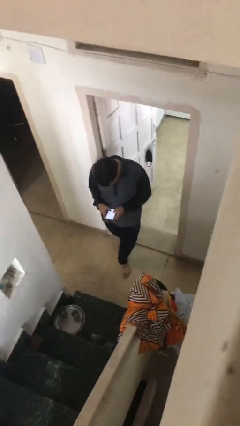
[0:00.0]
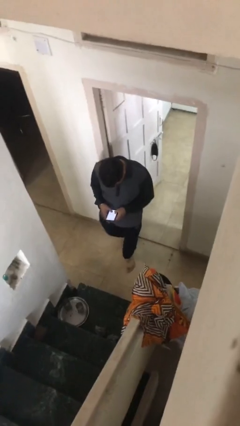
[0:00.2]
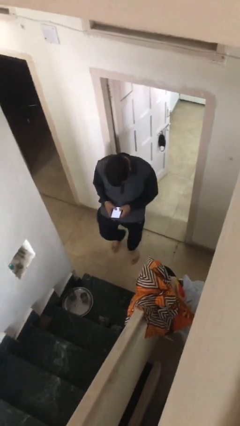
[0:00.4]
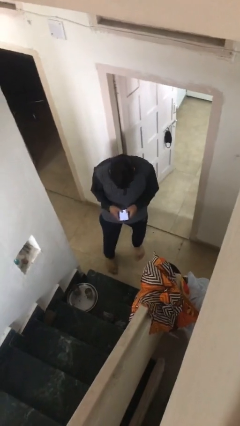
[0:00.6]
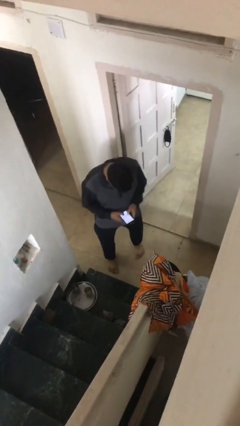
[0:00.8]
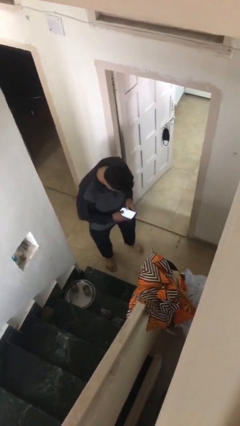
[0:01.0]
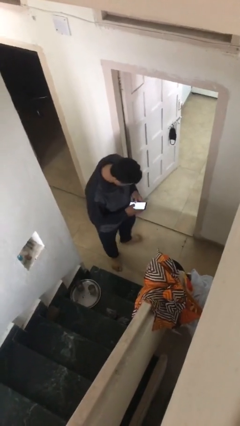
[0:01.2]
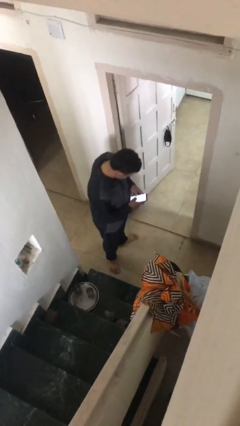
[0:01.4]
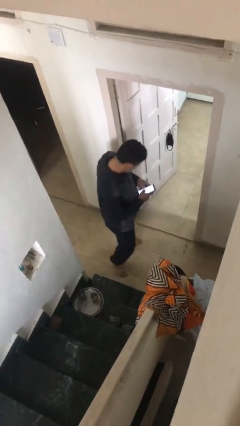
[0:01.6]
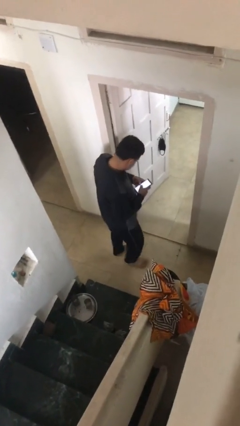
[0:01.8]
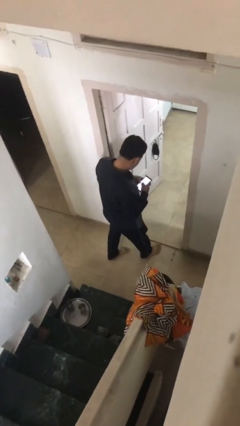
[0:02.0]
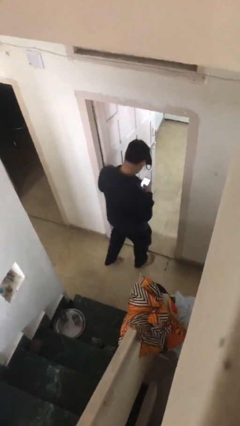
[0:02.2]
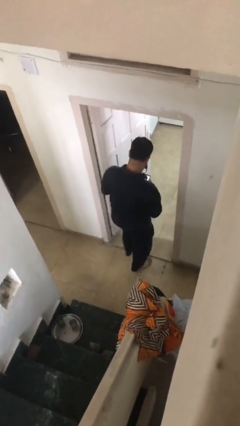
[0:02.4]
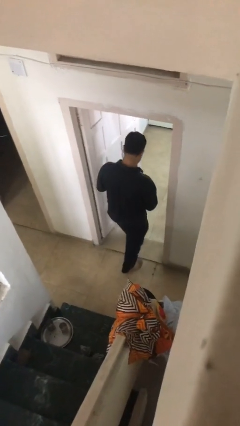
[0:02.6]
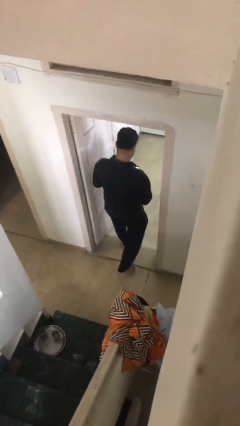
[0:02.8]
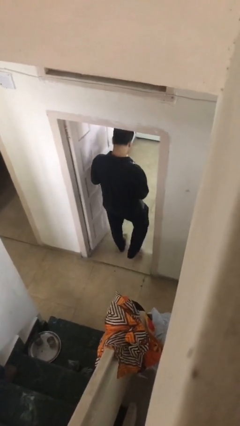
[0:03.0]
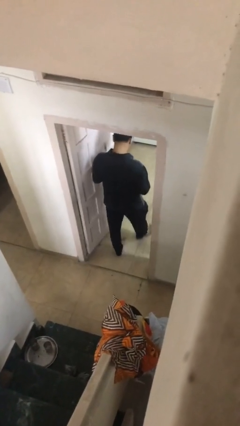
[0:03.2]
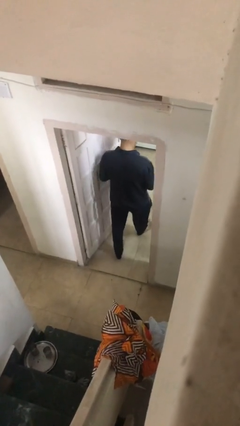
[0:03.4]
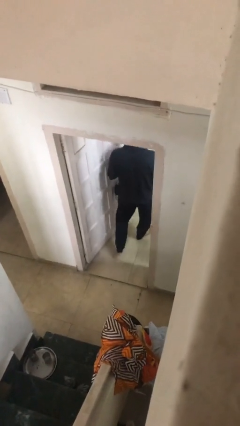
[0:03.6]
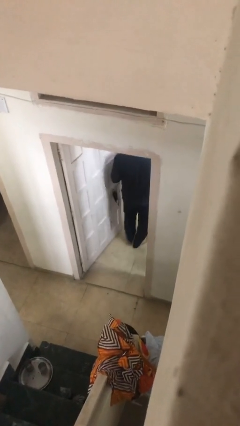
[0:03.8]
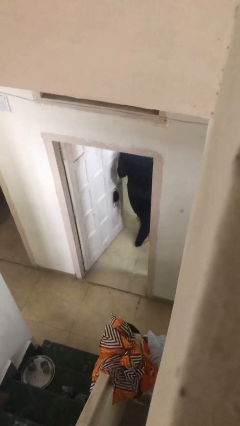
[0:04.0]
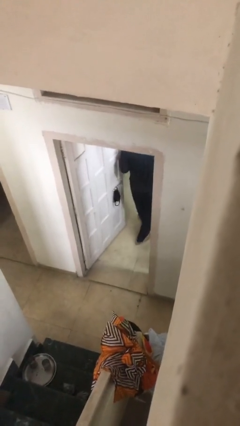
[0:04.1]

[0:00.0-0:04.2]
person exits scene through structure

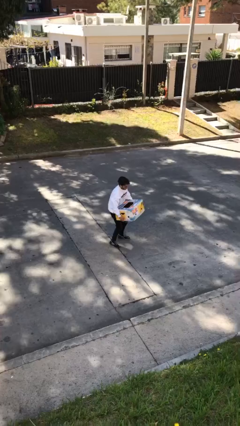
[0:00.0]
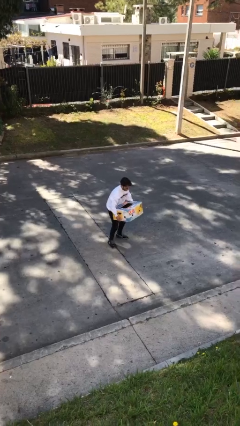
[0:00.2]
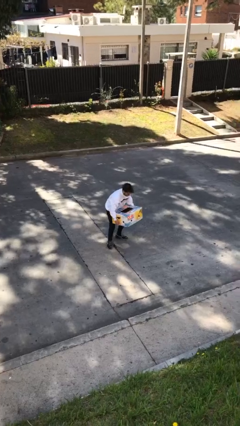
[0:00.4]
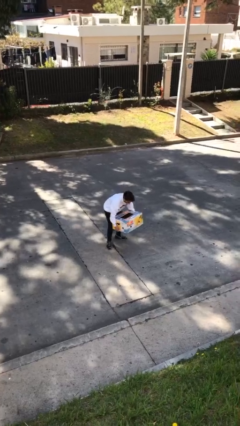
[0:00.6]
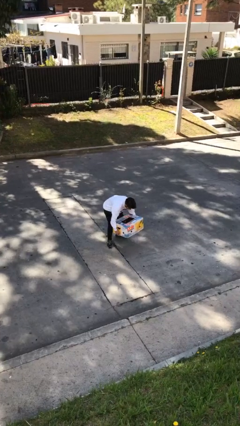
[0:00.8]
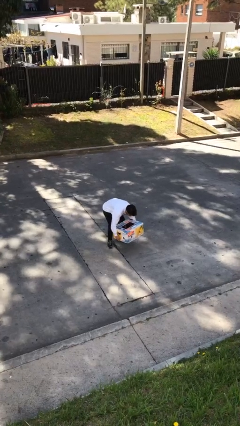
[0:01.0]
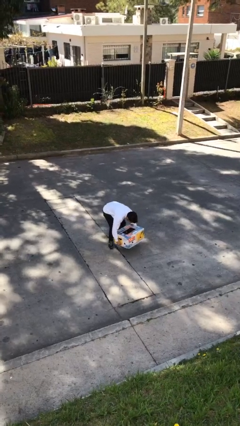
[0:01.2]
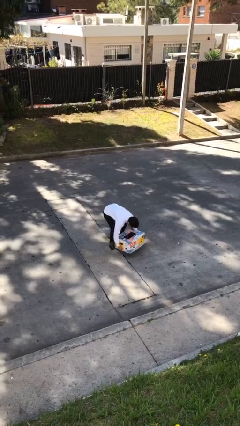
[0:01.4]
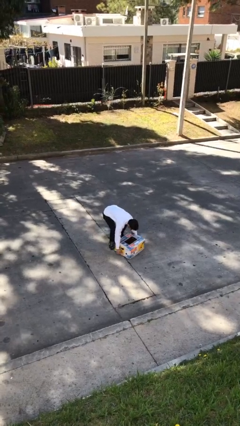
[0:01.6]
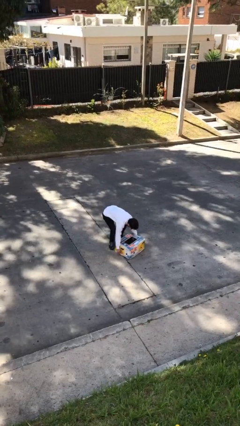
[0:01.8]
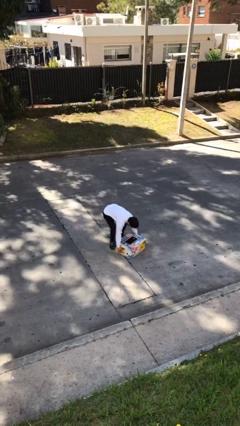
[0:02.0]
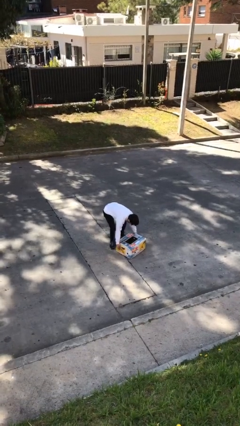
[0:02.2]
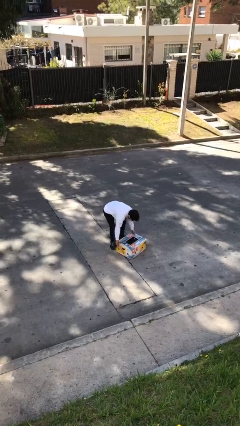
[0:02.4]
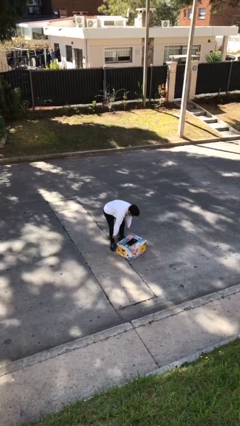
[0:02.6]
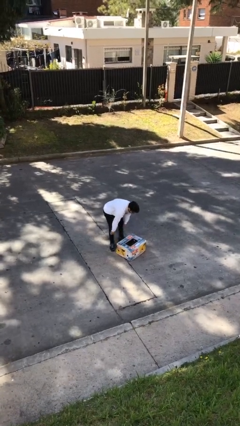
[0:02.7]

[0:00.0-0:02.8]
person puts down object on floor

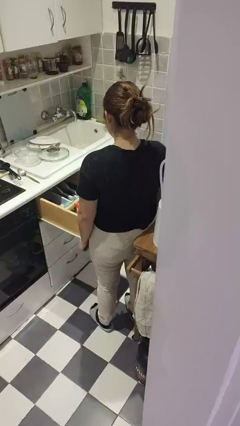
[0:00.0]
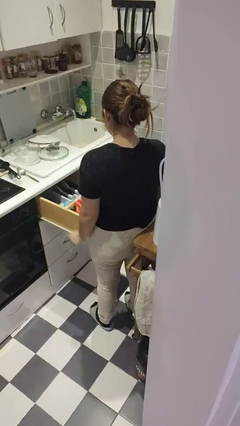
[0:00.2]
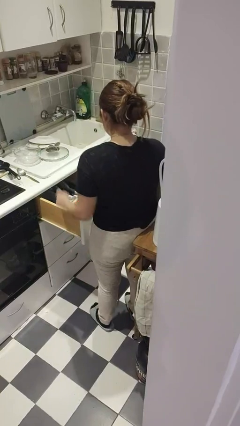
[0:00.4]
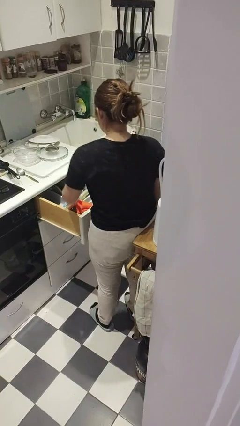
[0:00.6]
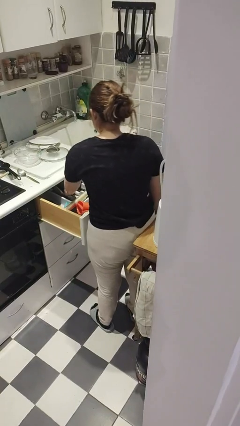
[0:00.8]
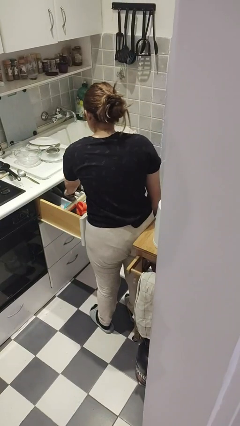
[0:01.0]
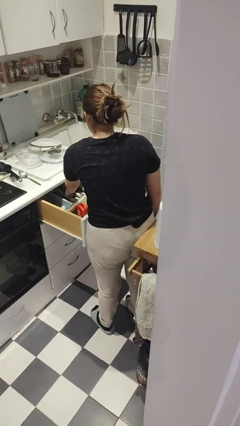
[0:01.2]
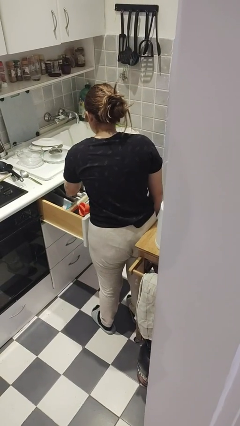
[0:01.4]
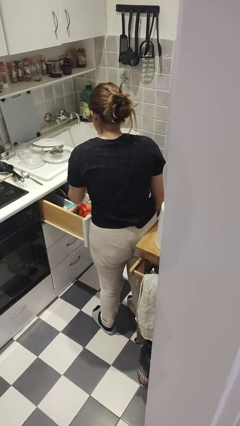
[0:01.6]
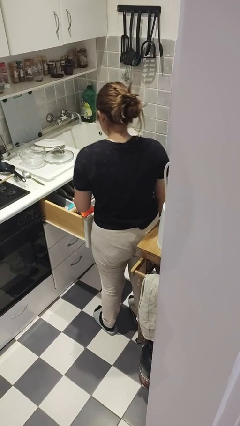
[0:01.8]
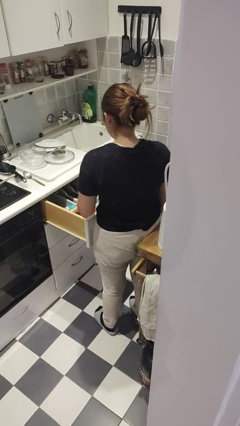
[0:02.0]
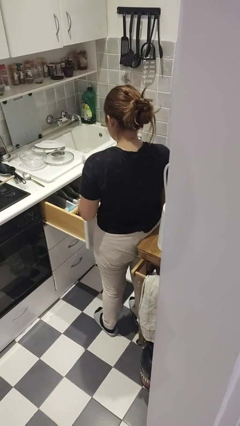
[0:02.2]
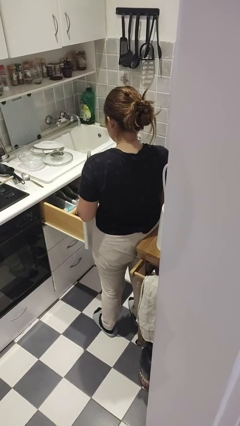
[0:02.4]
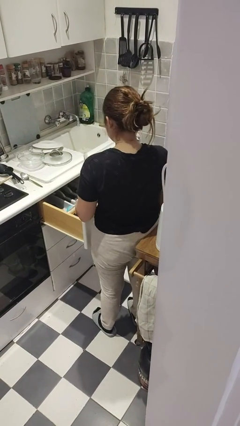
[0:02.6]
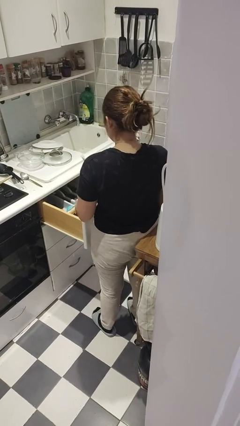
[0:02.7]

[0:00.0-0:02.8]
person takes object from kitchen drawer

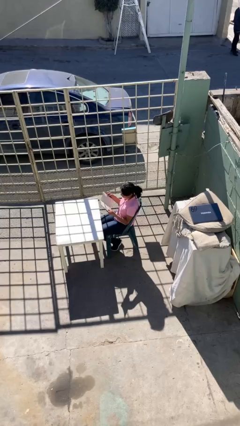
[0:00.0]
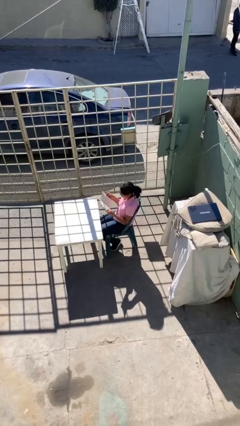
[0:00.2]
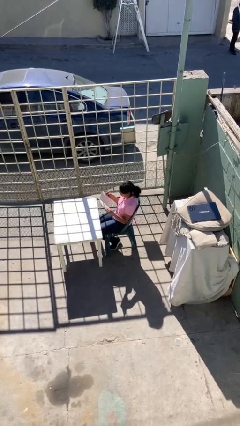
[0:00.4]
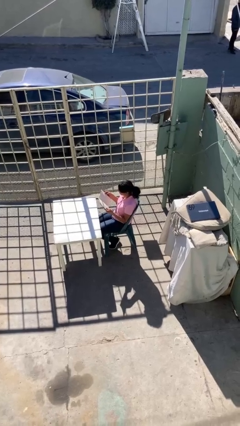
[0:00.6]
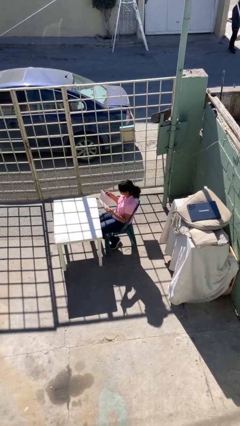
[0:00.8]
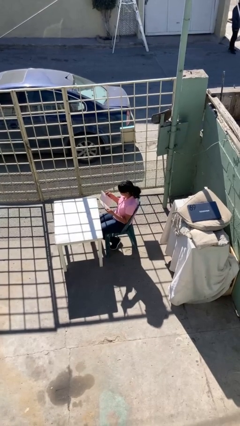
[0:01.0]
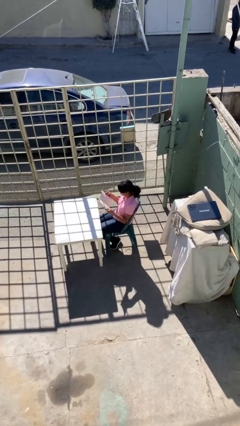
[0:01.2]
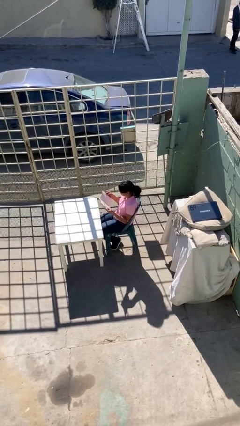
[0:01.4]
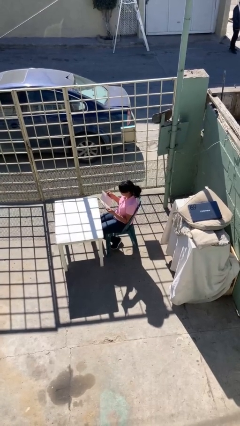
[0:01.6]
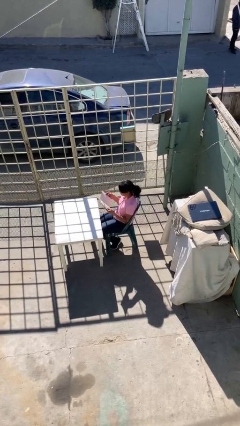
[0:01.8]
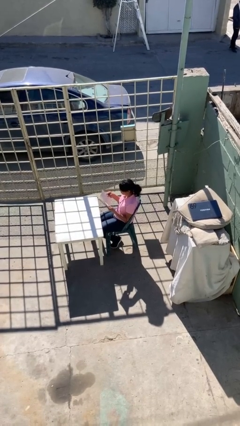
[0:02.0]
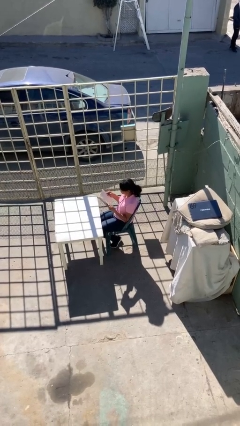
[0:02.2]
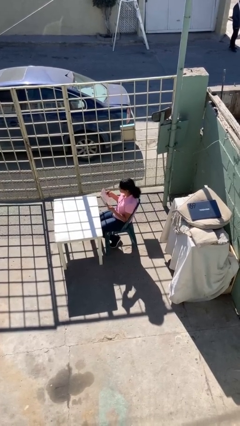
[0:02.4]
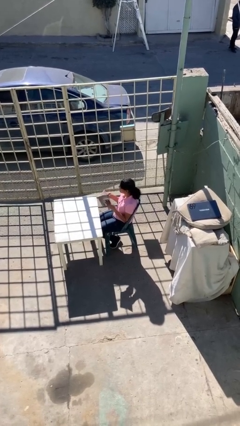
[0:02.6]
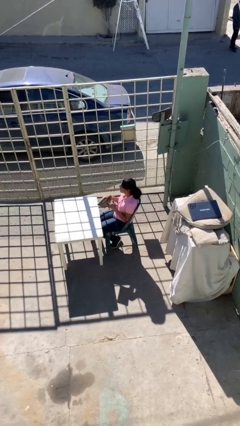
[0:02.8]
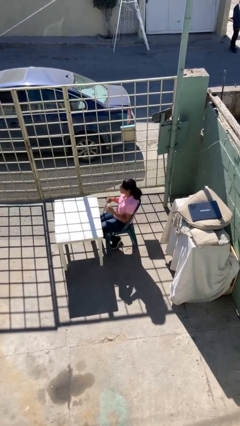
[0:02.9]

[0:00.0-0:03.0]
person reads document

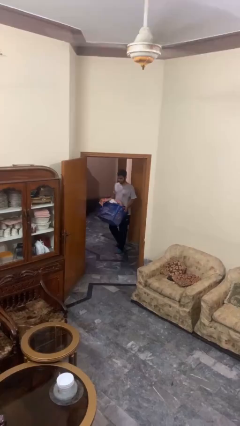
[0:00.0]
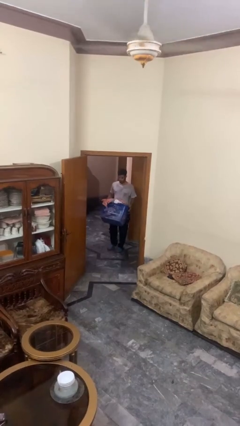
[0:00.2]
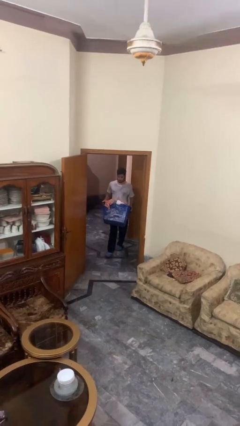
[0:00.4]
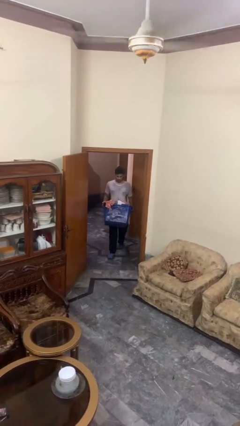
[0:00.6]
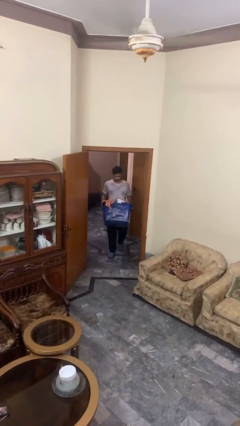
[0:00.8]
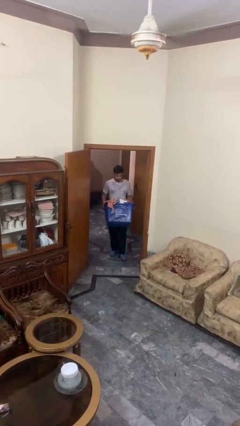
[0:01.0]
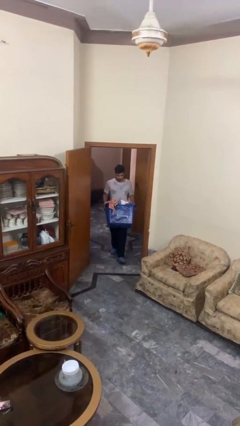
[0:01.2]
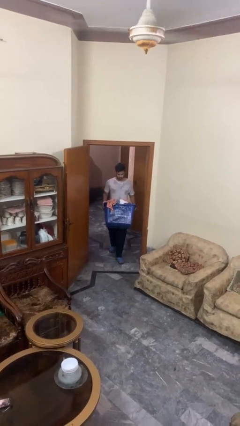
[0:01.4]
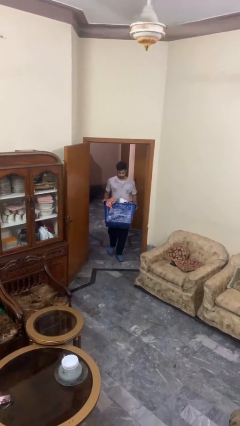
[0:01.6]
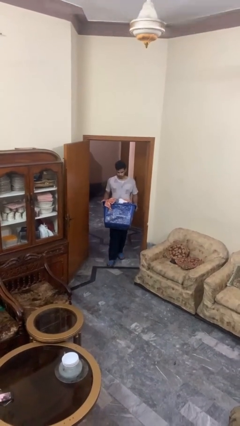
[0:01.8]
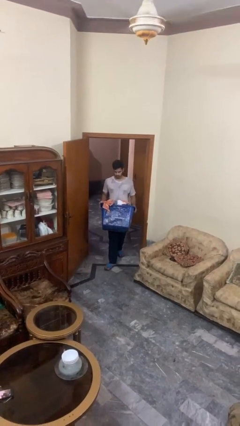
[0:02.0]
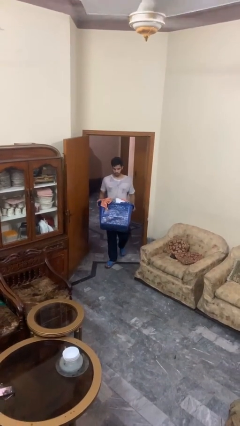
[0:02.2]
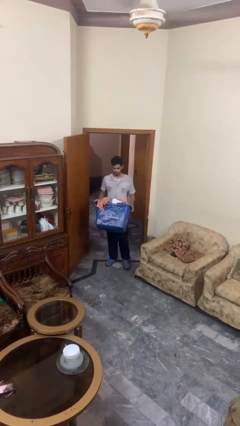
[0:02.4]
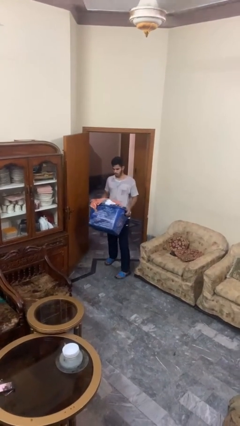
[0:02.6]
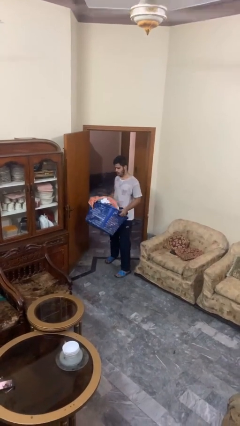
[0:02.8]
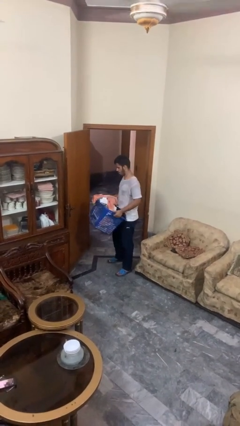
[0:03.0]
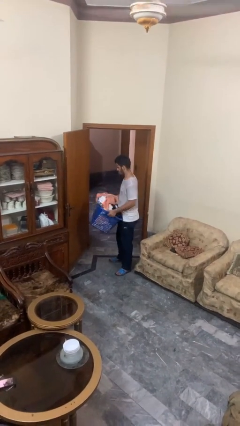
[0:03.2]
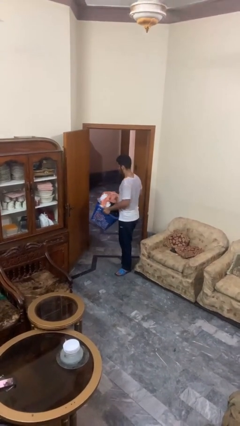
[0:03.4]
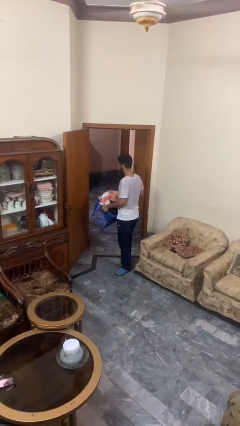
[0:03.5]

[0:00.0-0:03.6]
person carries laundry basket

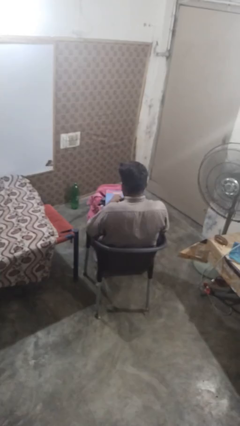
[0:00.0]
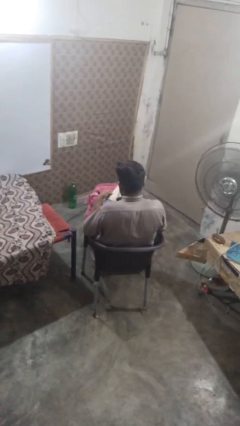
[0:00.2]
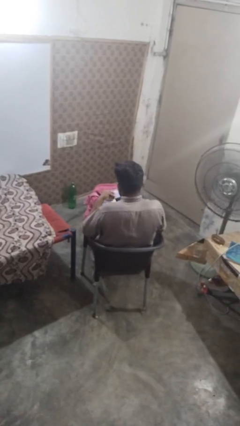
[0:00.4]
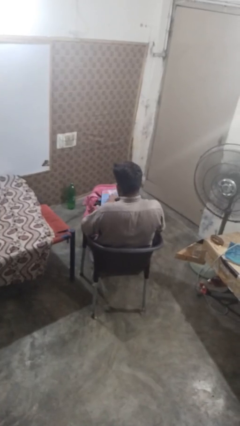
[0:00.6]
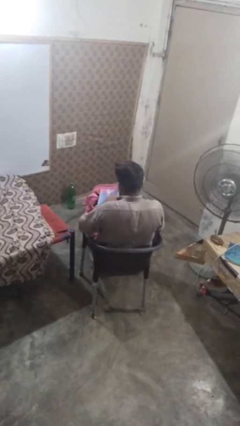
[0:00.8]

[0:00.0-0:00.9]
person puts object into backpack
